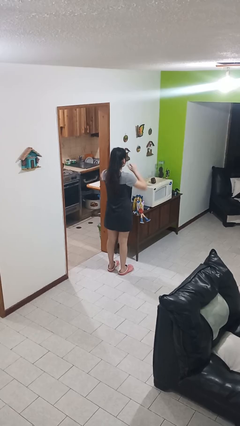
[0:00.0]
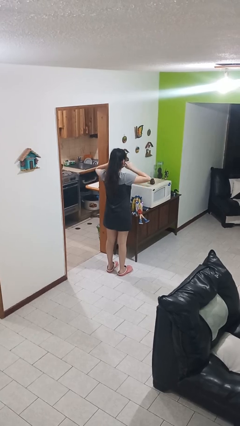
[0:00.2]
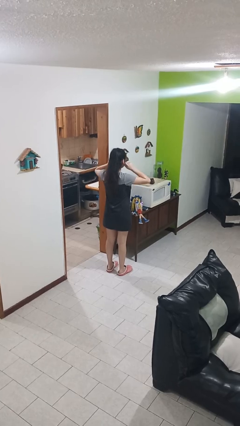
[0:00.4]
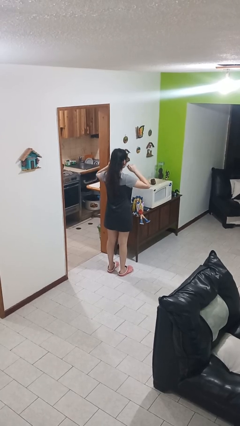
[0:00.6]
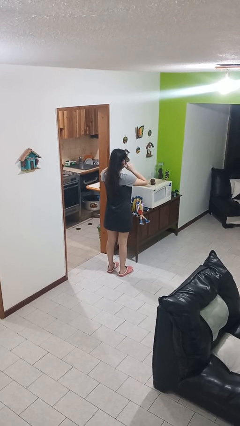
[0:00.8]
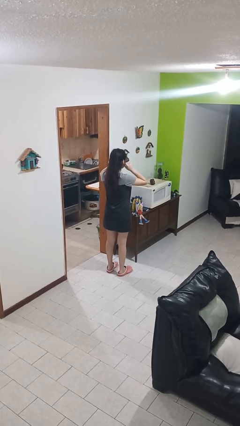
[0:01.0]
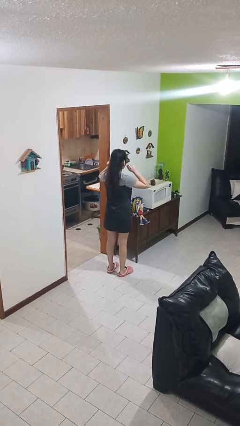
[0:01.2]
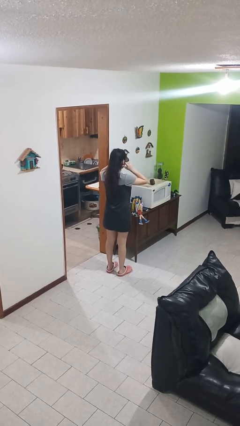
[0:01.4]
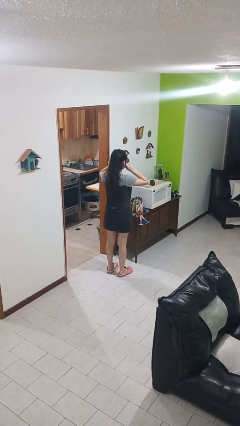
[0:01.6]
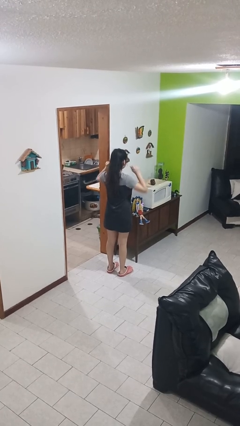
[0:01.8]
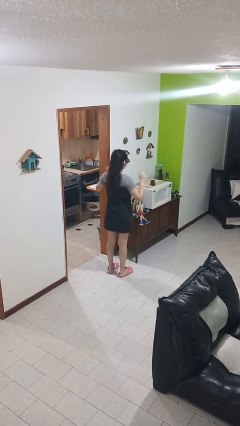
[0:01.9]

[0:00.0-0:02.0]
person touches earlobe

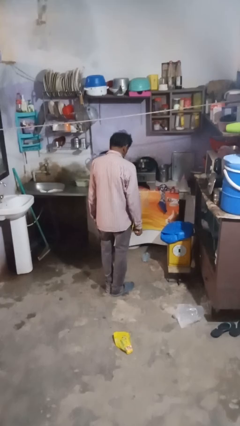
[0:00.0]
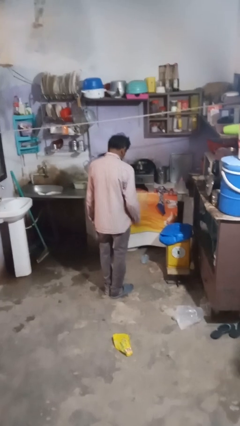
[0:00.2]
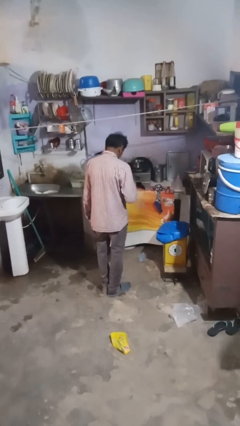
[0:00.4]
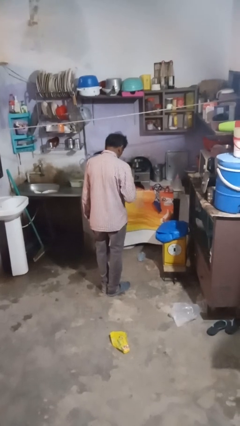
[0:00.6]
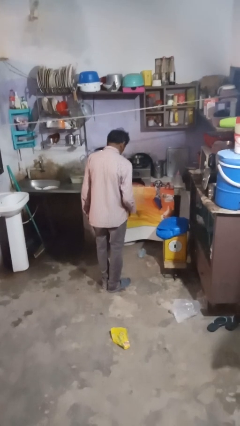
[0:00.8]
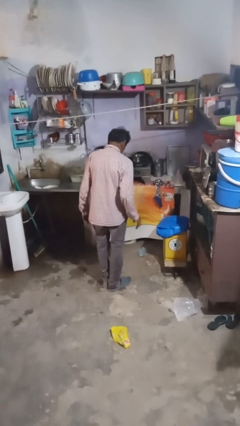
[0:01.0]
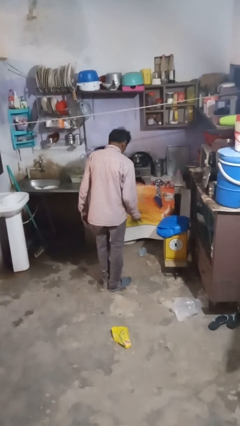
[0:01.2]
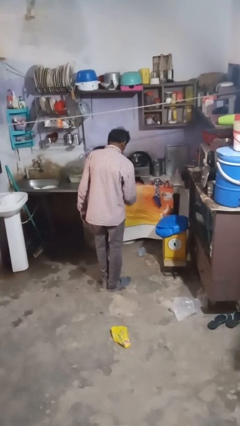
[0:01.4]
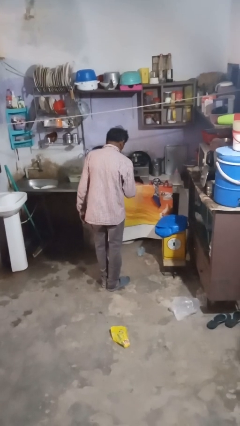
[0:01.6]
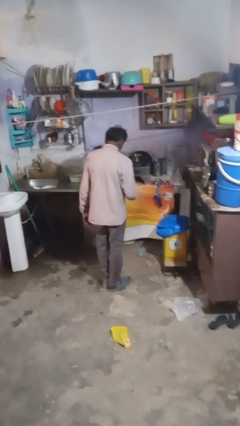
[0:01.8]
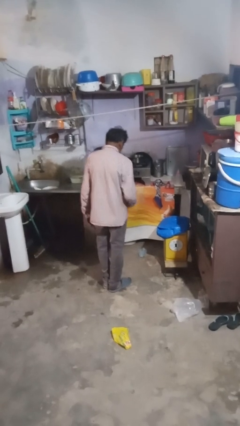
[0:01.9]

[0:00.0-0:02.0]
person bounces ball on floor

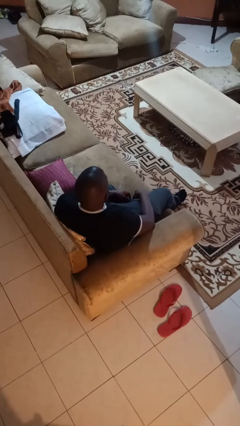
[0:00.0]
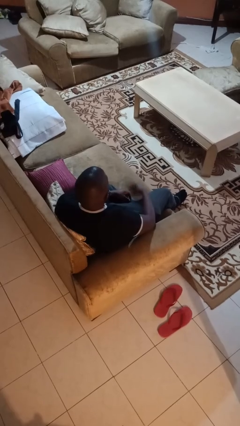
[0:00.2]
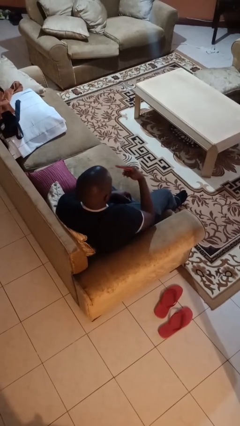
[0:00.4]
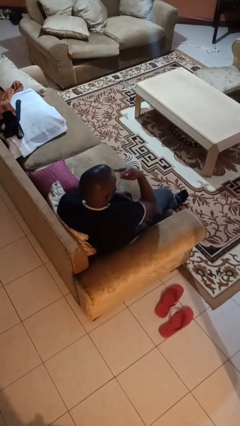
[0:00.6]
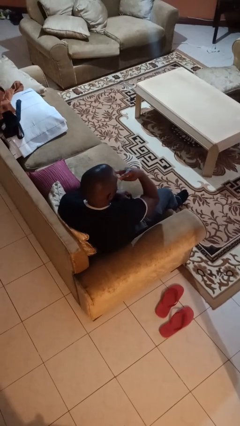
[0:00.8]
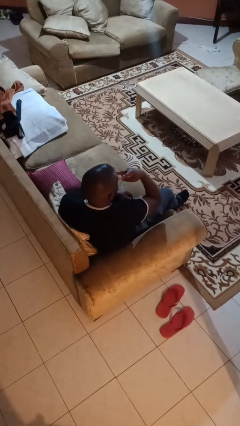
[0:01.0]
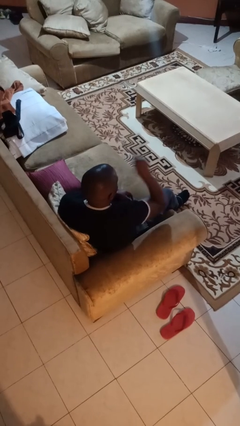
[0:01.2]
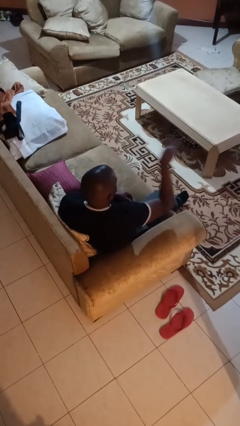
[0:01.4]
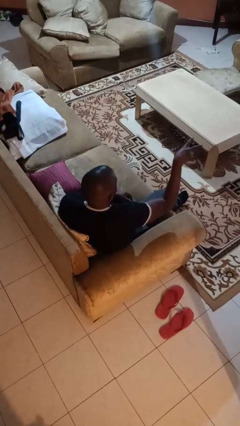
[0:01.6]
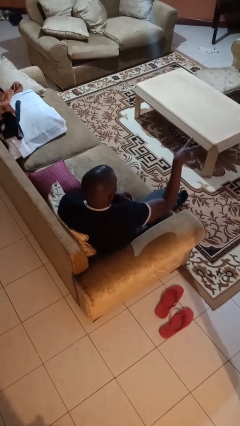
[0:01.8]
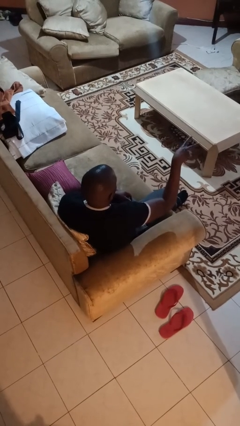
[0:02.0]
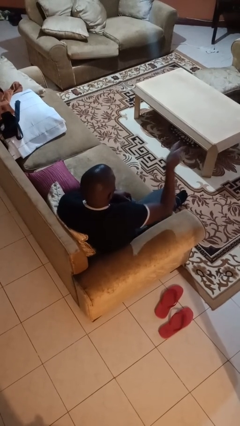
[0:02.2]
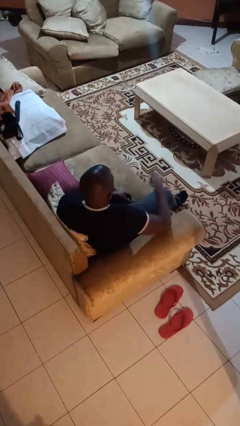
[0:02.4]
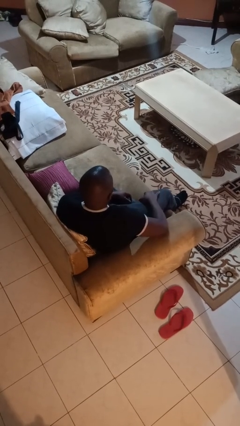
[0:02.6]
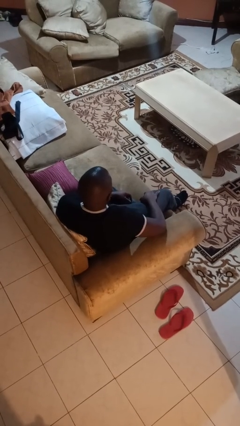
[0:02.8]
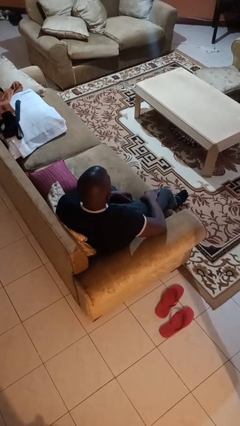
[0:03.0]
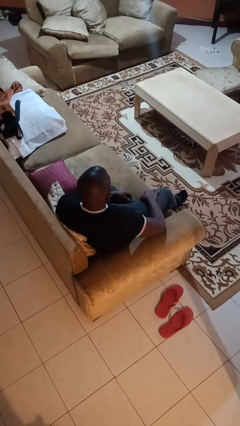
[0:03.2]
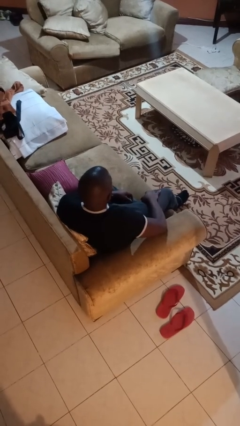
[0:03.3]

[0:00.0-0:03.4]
person gestures watch closely

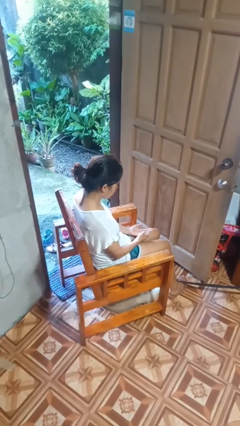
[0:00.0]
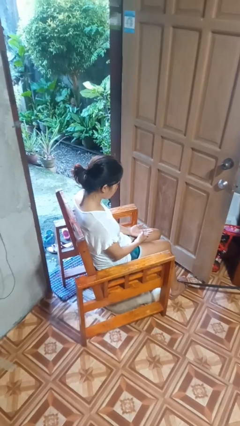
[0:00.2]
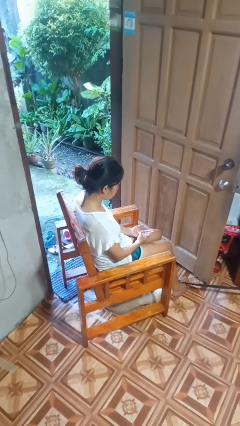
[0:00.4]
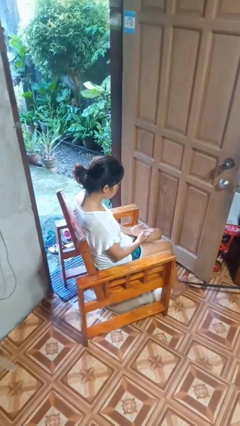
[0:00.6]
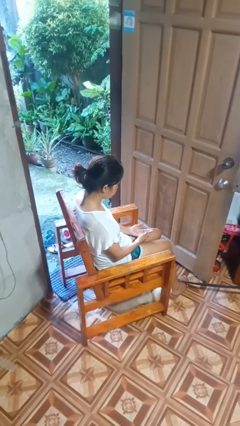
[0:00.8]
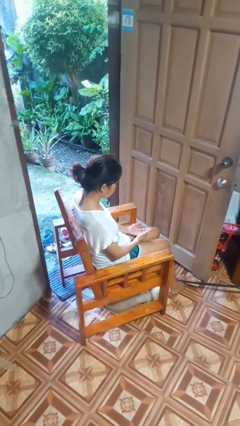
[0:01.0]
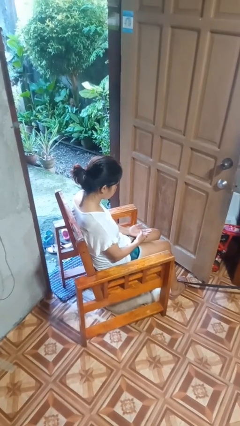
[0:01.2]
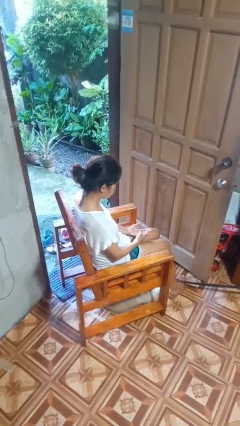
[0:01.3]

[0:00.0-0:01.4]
person looks at hands in lap

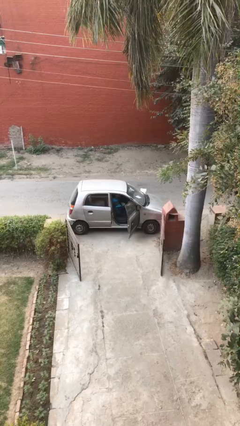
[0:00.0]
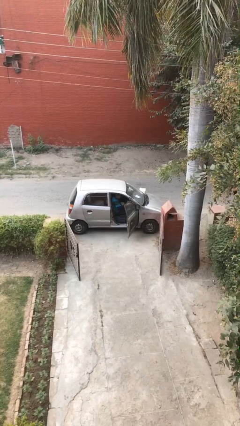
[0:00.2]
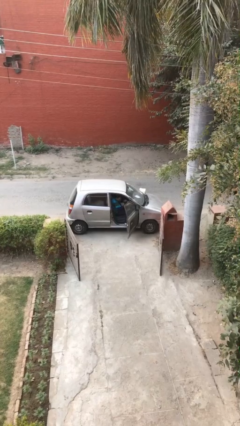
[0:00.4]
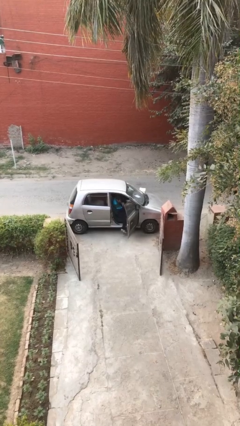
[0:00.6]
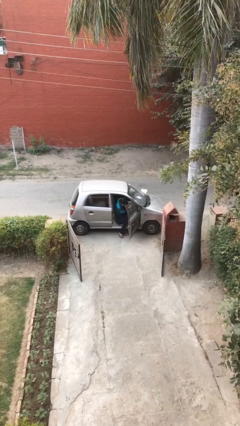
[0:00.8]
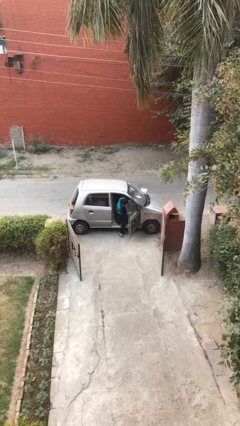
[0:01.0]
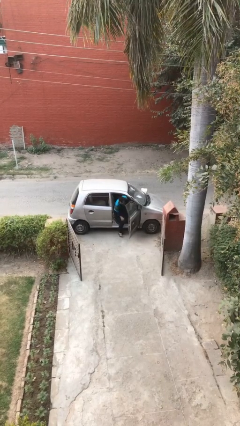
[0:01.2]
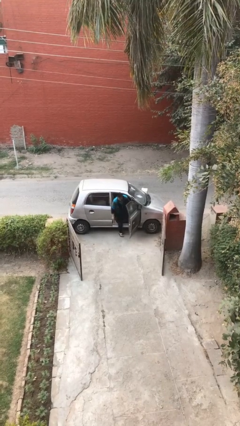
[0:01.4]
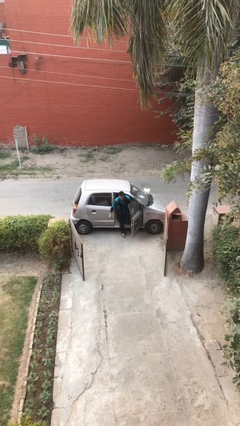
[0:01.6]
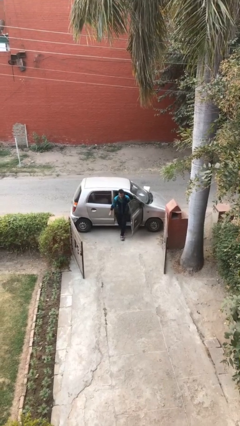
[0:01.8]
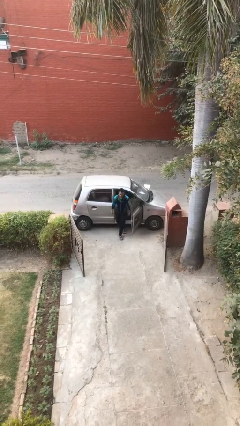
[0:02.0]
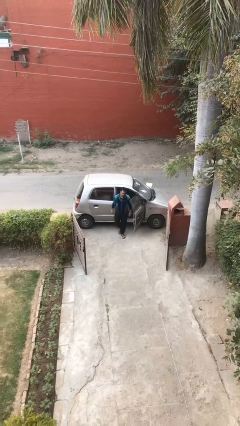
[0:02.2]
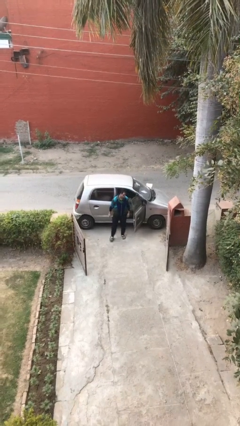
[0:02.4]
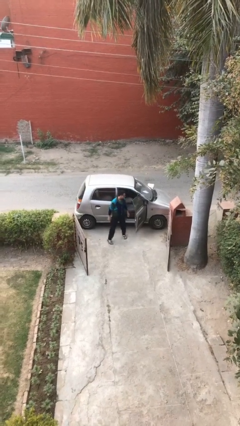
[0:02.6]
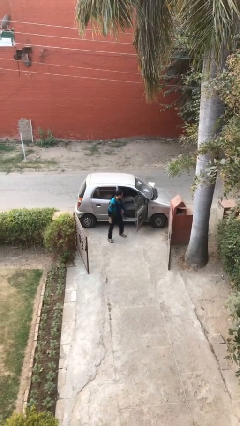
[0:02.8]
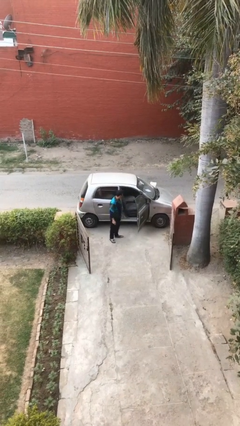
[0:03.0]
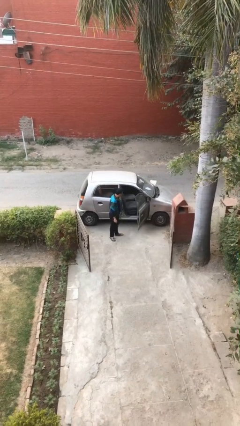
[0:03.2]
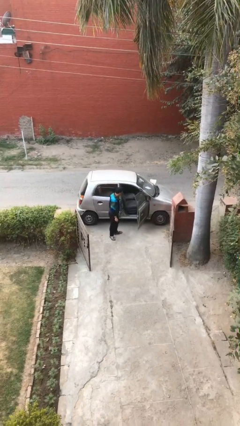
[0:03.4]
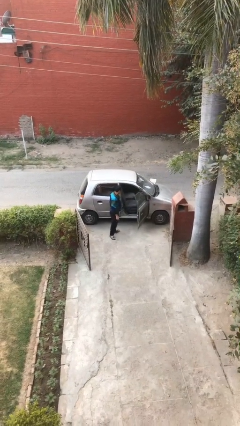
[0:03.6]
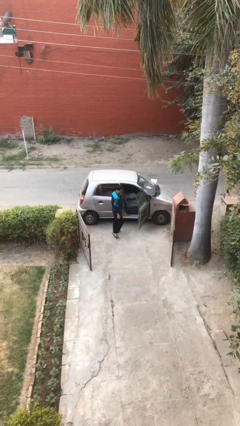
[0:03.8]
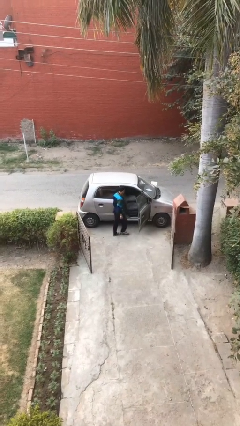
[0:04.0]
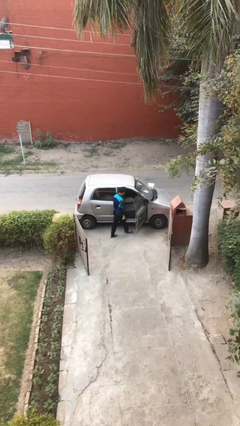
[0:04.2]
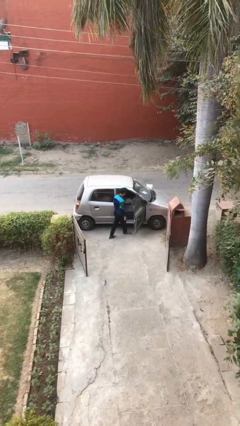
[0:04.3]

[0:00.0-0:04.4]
person exits car

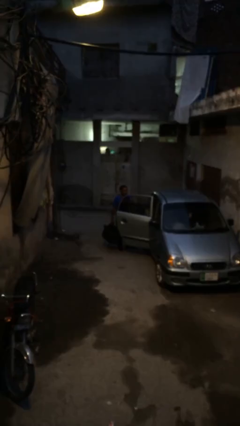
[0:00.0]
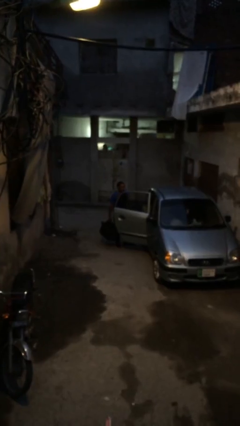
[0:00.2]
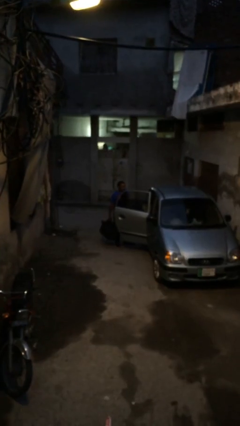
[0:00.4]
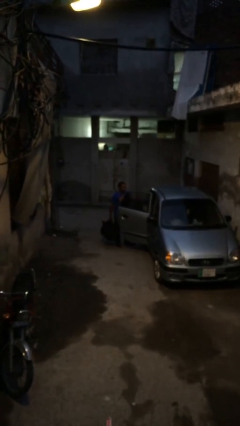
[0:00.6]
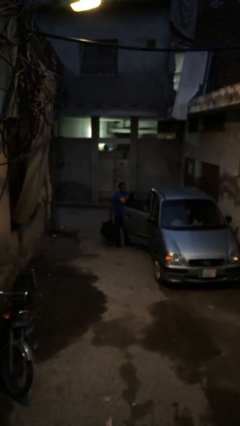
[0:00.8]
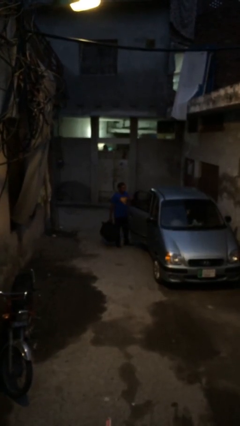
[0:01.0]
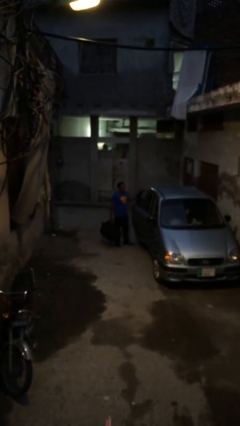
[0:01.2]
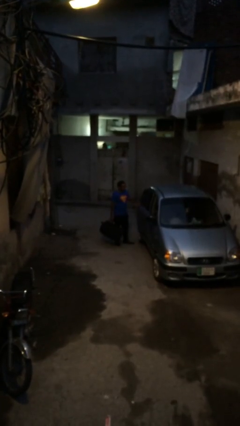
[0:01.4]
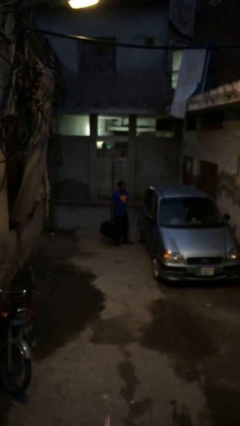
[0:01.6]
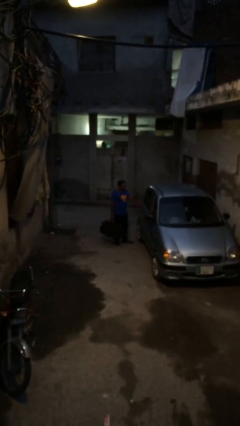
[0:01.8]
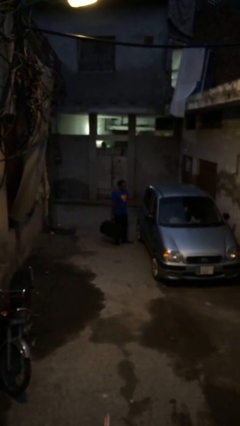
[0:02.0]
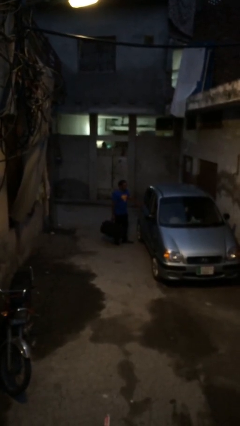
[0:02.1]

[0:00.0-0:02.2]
person closes car door

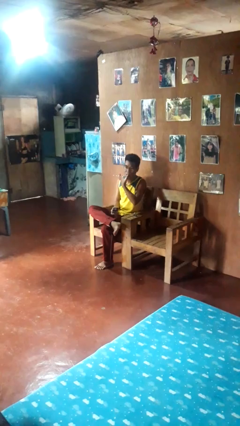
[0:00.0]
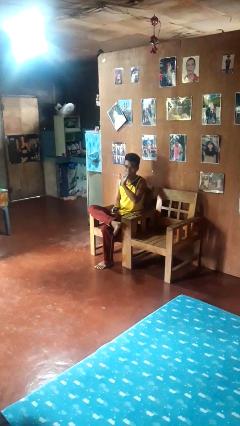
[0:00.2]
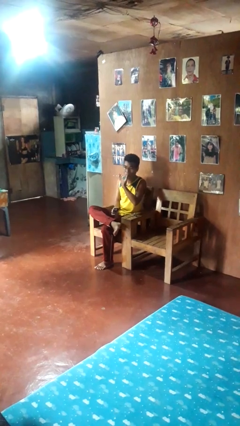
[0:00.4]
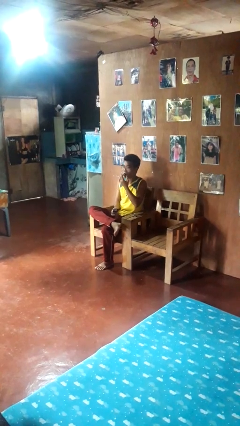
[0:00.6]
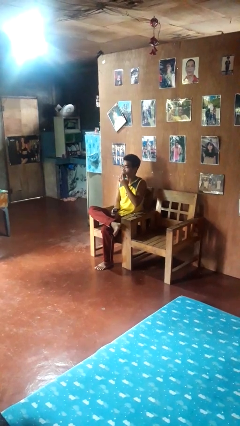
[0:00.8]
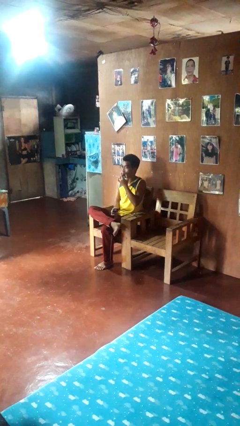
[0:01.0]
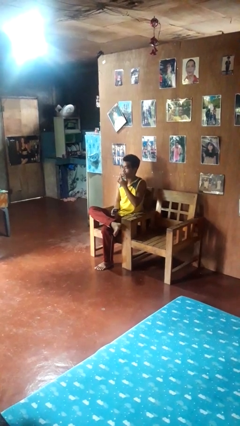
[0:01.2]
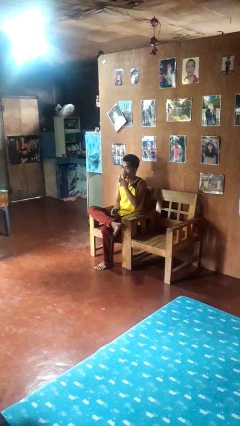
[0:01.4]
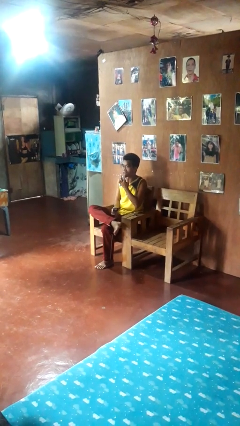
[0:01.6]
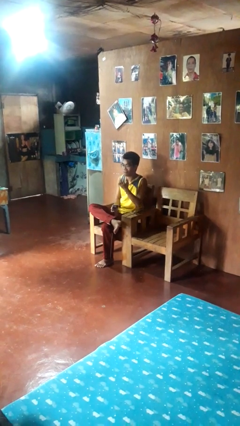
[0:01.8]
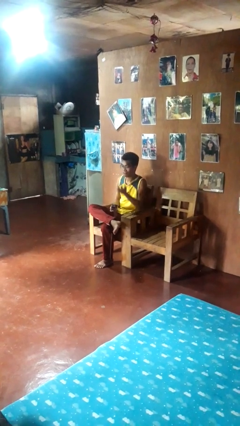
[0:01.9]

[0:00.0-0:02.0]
person licks fingers
